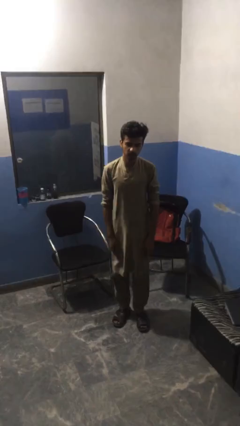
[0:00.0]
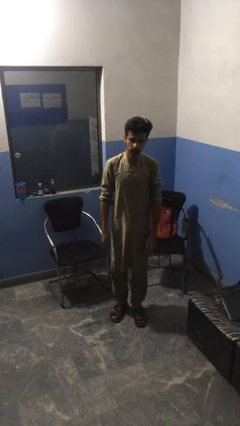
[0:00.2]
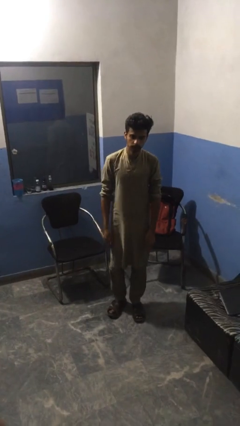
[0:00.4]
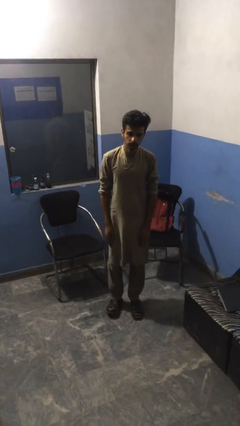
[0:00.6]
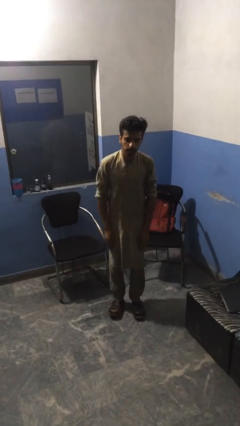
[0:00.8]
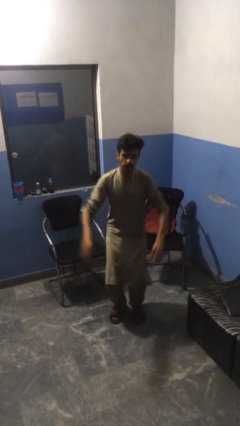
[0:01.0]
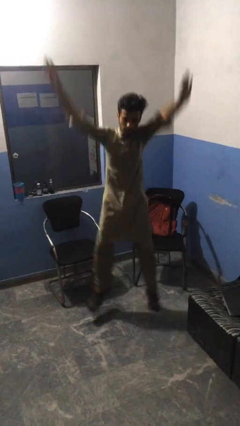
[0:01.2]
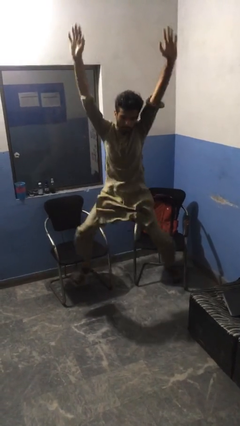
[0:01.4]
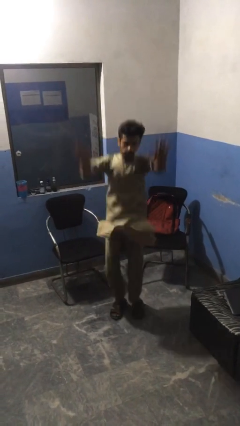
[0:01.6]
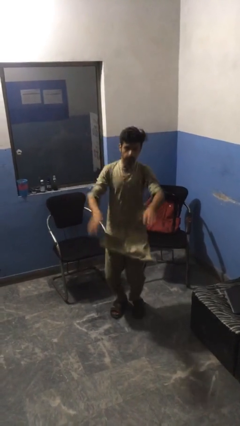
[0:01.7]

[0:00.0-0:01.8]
person exercises with jumping jacks

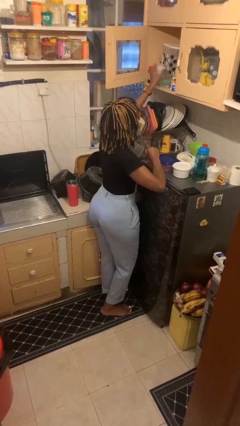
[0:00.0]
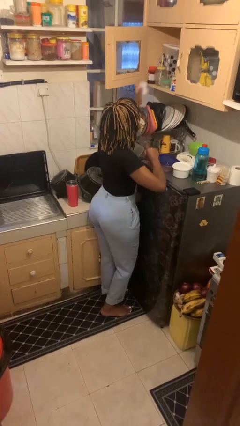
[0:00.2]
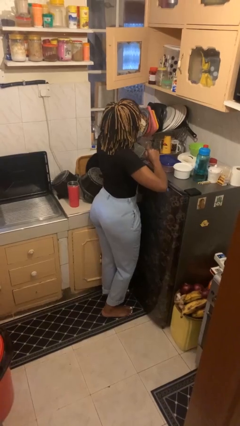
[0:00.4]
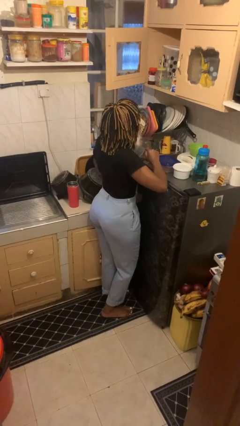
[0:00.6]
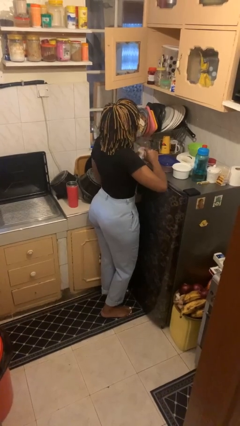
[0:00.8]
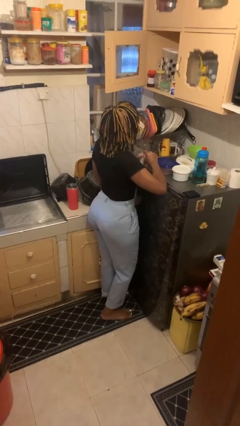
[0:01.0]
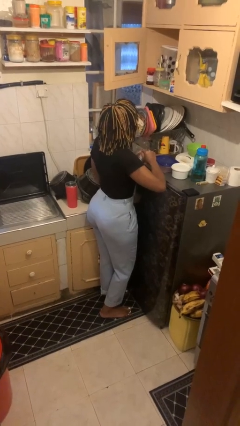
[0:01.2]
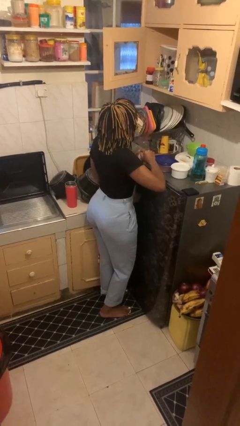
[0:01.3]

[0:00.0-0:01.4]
person takes object from cabinet

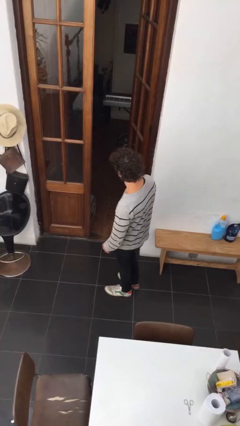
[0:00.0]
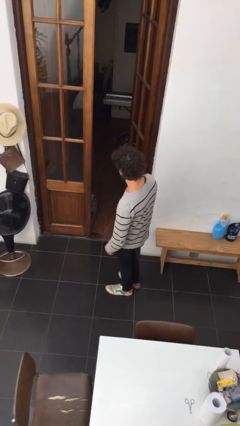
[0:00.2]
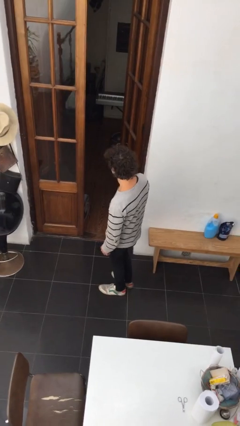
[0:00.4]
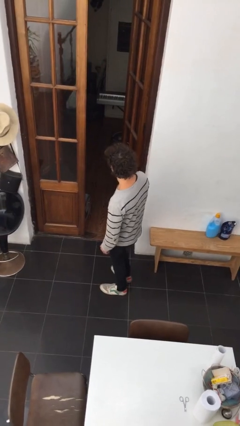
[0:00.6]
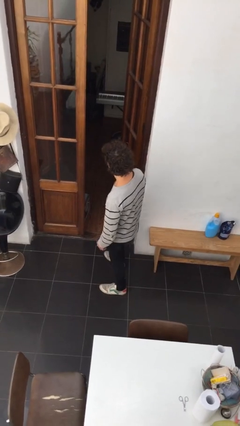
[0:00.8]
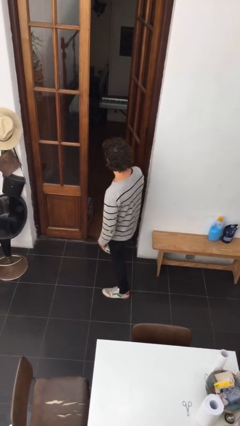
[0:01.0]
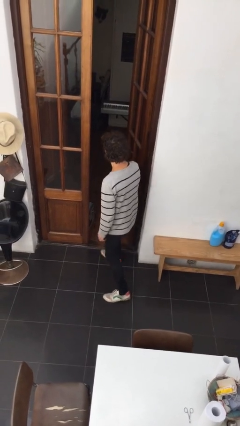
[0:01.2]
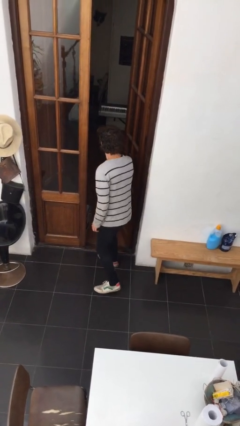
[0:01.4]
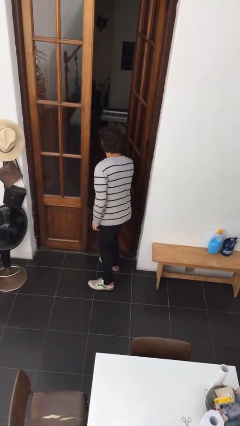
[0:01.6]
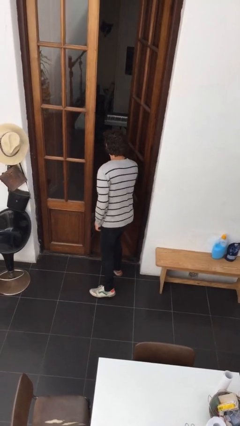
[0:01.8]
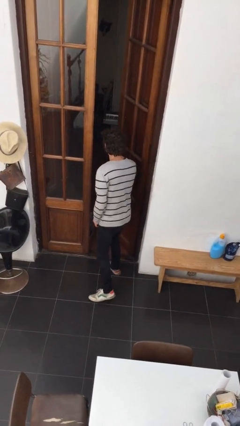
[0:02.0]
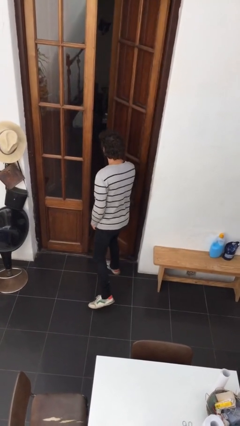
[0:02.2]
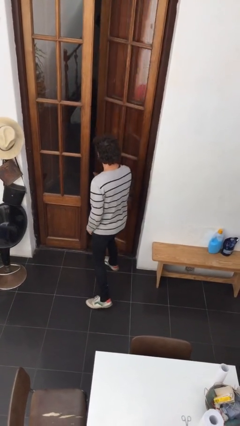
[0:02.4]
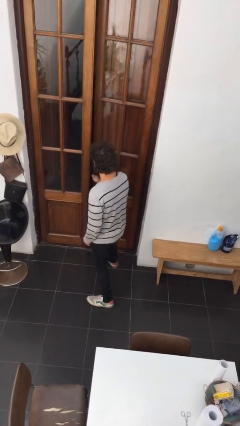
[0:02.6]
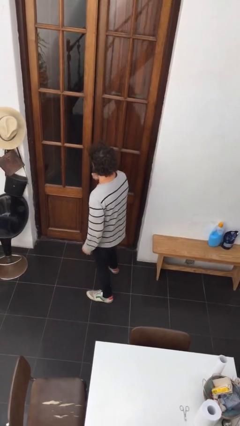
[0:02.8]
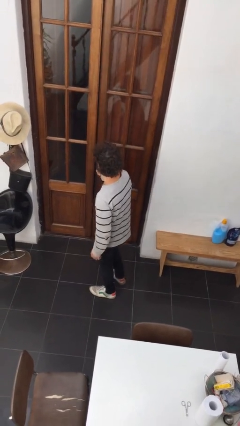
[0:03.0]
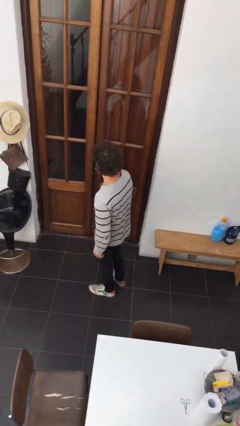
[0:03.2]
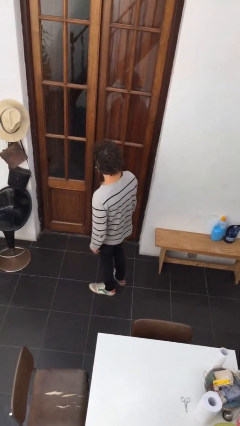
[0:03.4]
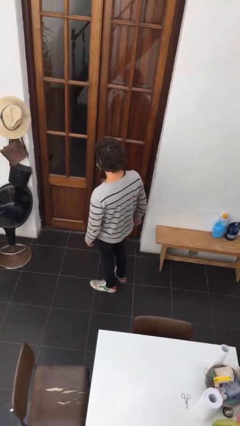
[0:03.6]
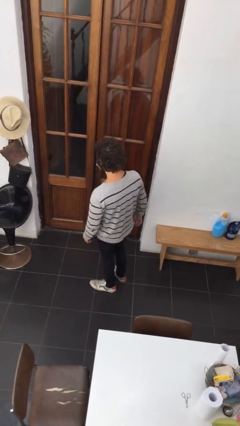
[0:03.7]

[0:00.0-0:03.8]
person closes facility door

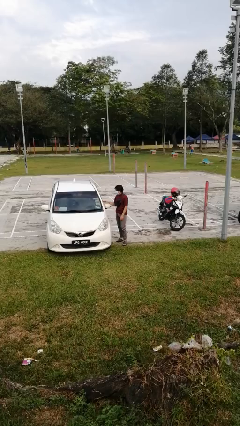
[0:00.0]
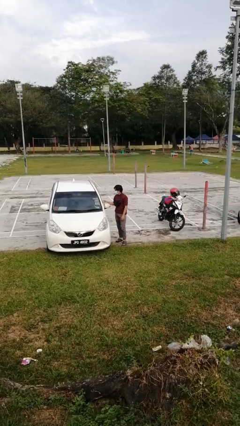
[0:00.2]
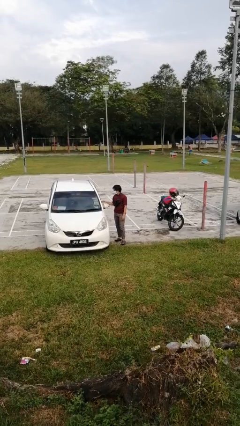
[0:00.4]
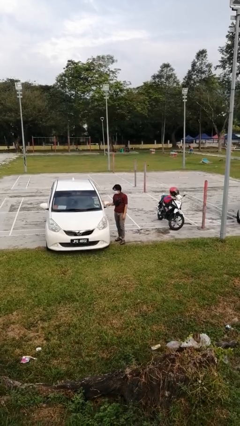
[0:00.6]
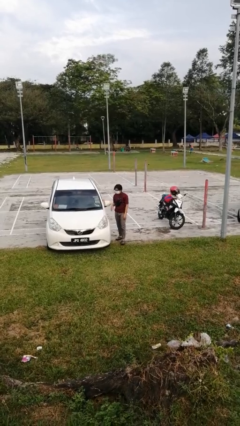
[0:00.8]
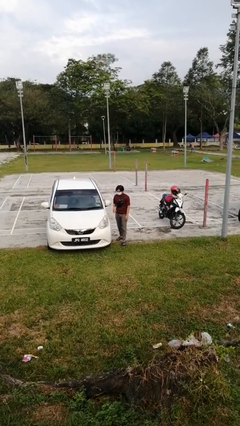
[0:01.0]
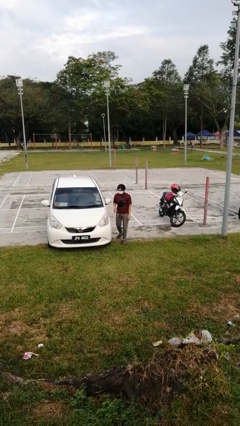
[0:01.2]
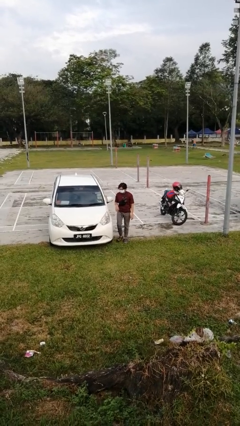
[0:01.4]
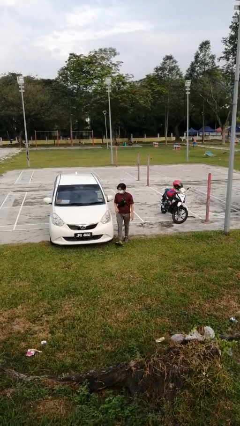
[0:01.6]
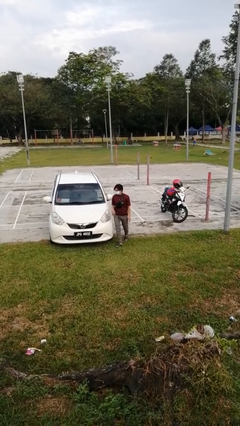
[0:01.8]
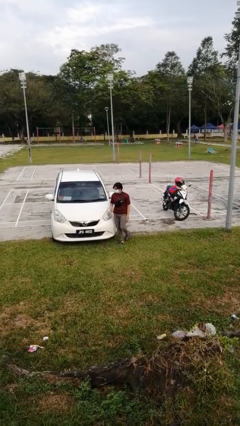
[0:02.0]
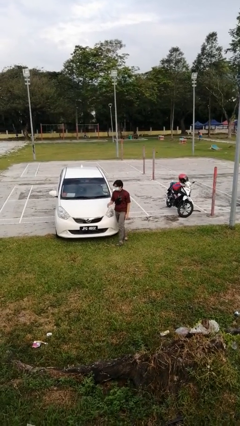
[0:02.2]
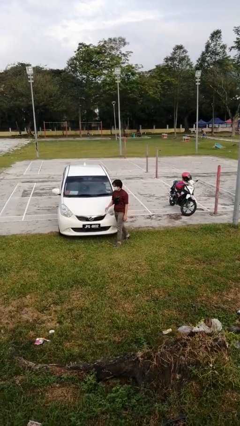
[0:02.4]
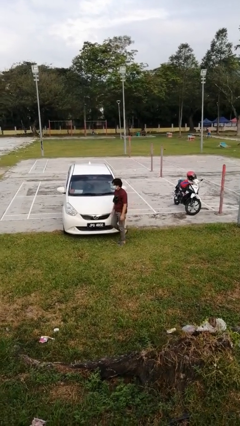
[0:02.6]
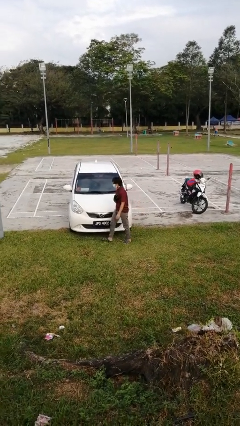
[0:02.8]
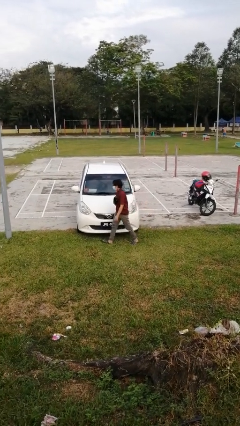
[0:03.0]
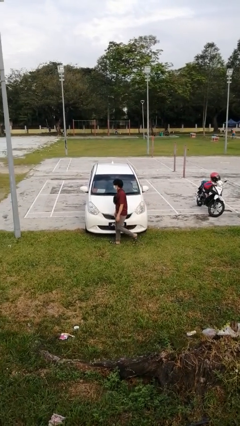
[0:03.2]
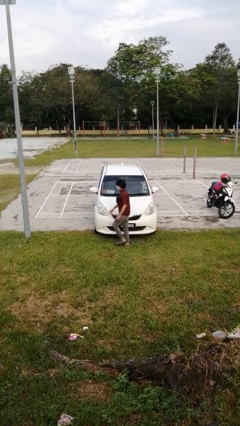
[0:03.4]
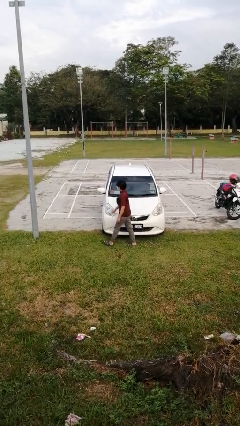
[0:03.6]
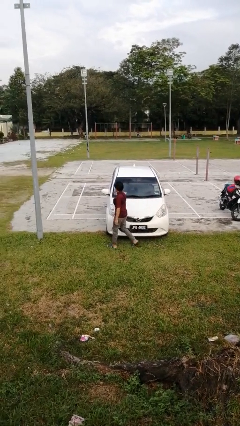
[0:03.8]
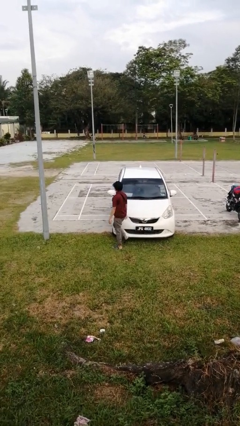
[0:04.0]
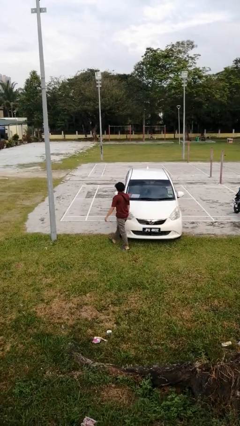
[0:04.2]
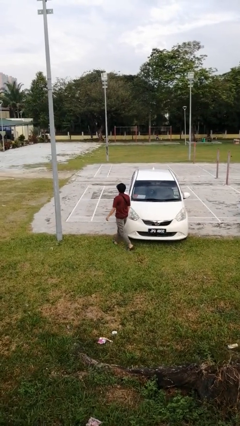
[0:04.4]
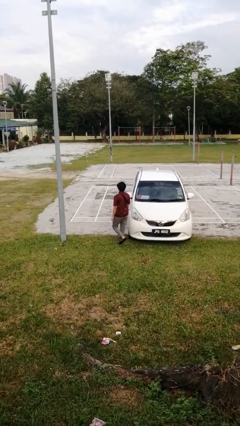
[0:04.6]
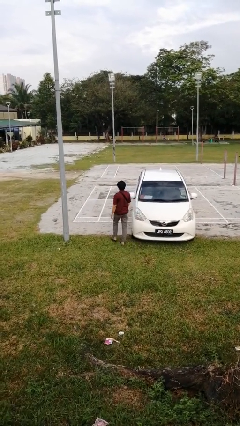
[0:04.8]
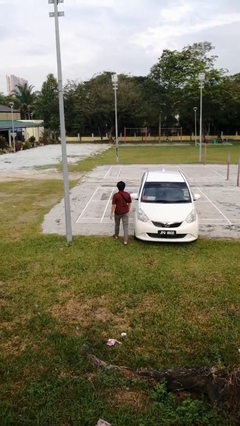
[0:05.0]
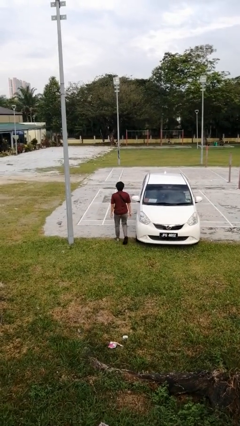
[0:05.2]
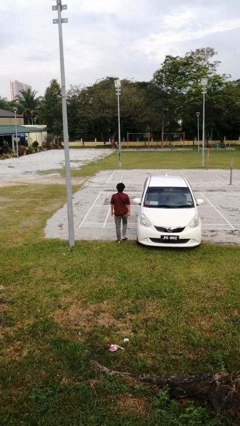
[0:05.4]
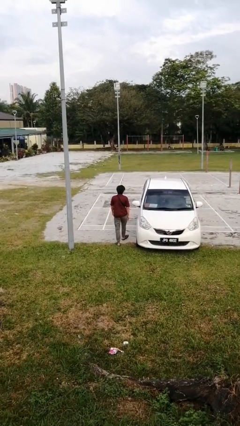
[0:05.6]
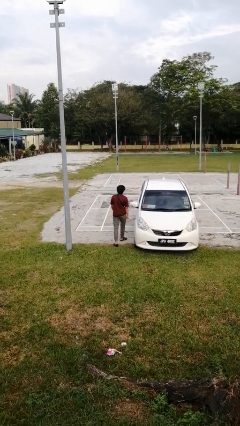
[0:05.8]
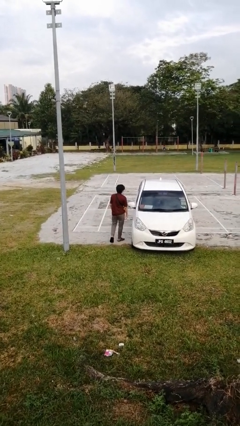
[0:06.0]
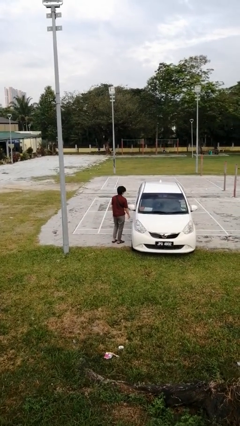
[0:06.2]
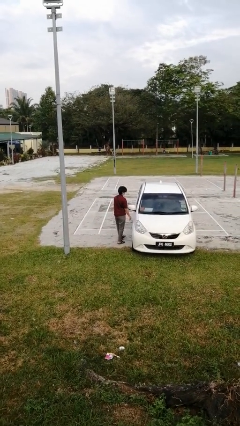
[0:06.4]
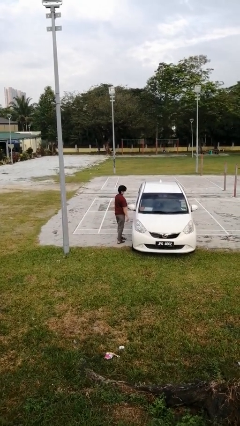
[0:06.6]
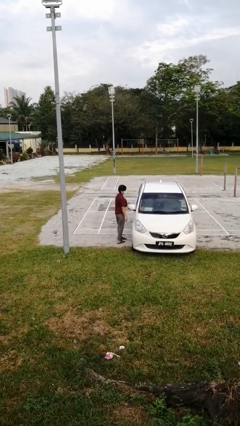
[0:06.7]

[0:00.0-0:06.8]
person walks around car

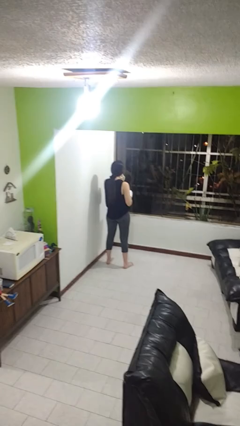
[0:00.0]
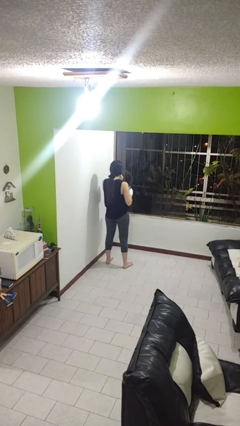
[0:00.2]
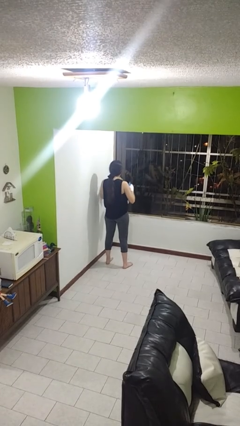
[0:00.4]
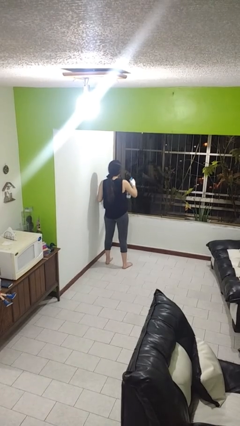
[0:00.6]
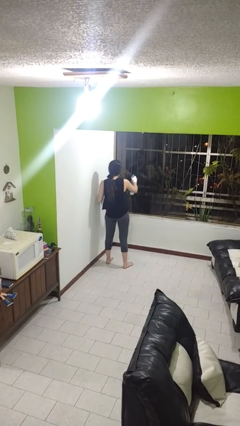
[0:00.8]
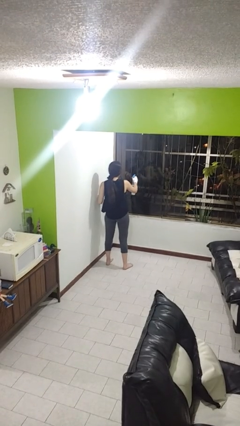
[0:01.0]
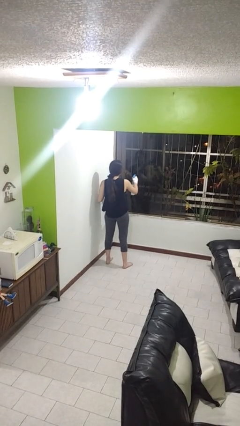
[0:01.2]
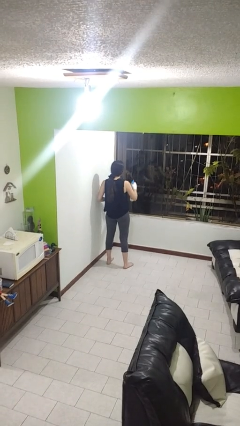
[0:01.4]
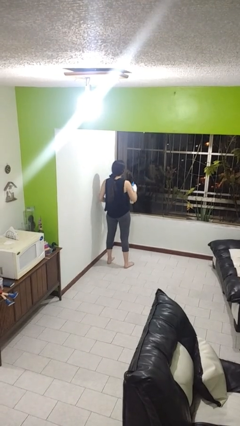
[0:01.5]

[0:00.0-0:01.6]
person sprays from bottle

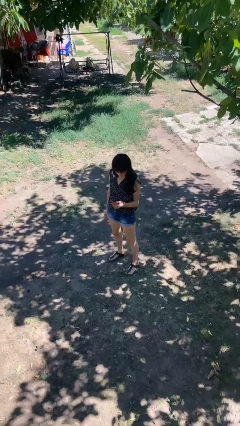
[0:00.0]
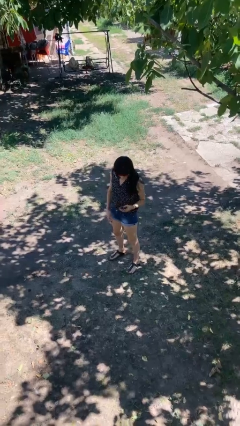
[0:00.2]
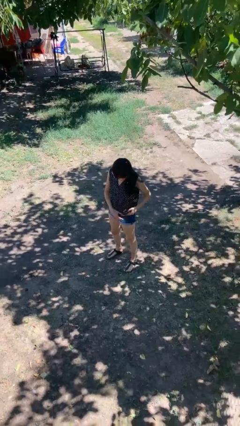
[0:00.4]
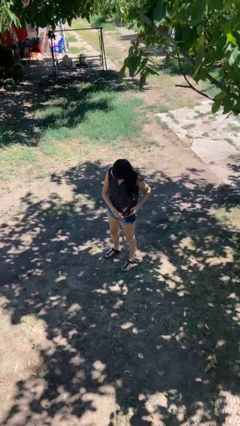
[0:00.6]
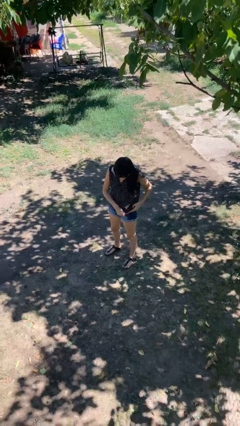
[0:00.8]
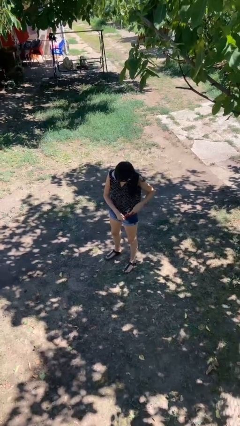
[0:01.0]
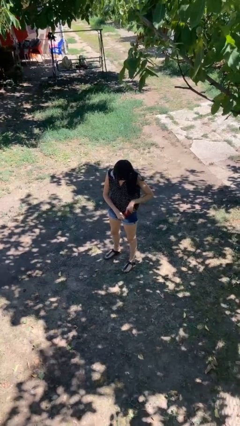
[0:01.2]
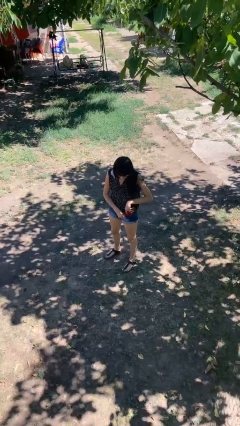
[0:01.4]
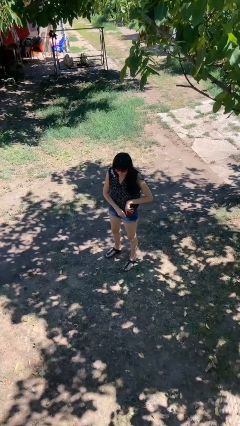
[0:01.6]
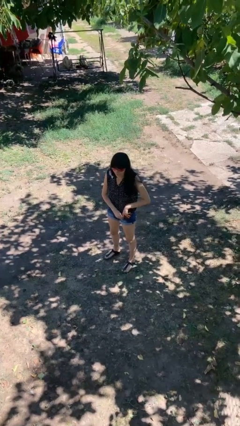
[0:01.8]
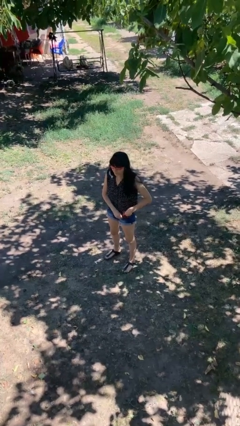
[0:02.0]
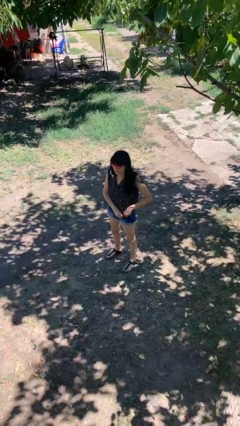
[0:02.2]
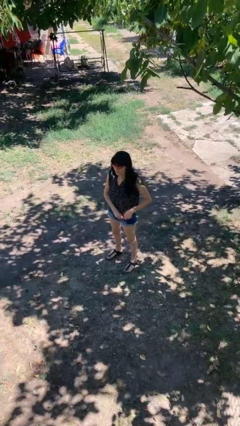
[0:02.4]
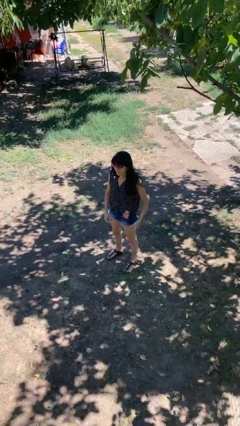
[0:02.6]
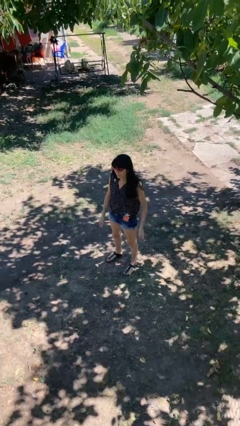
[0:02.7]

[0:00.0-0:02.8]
person puts phone into pocket
